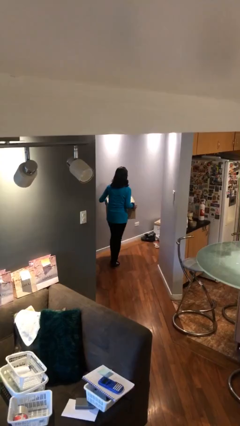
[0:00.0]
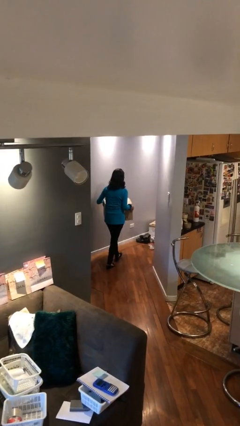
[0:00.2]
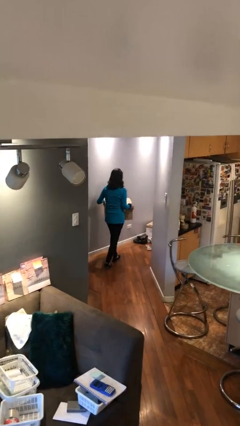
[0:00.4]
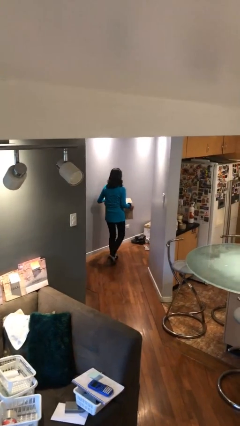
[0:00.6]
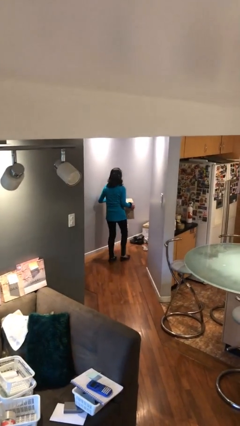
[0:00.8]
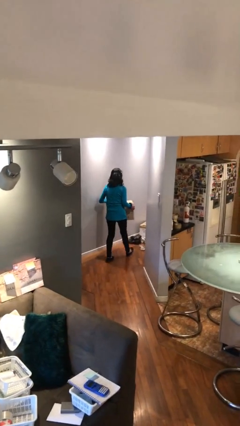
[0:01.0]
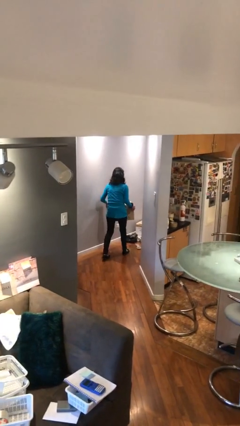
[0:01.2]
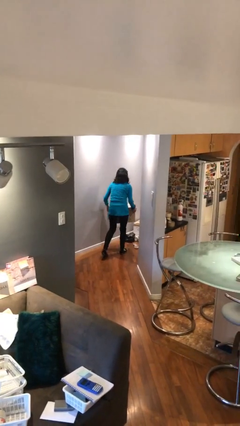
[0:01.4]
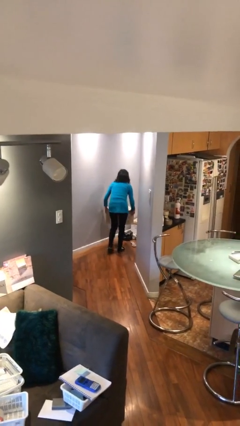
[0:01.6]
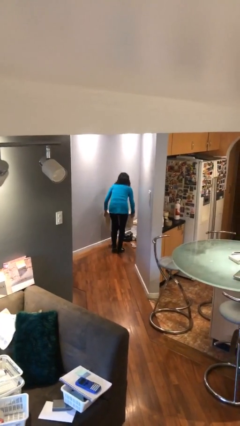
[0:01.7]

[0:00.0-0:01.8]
person carries heavy object

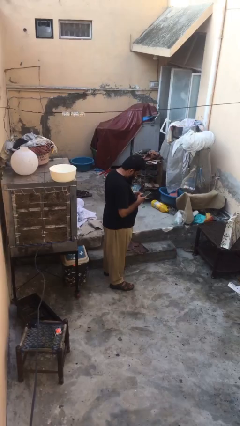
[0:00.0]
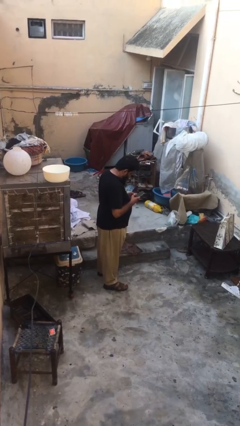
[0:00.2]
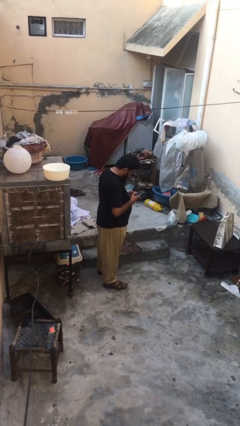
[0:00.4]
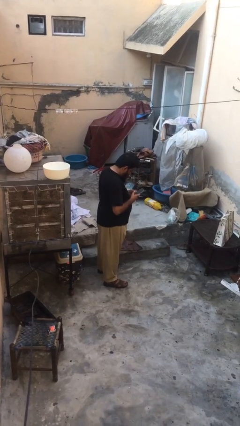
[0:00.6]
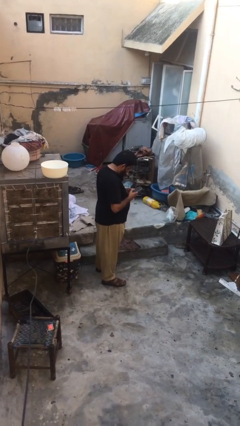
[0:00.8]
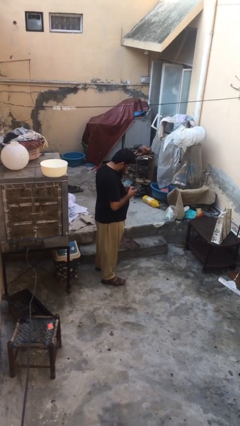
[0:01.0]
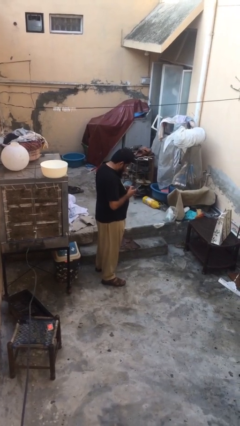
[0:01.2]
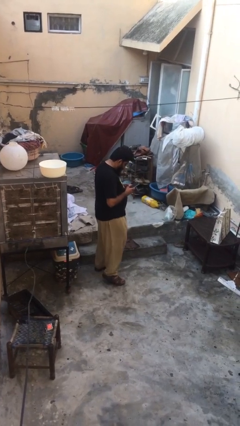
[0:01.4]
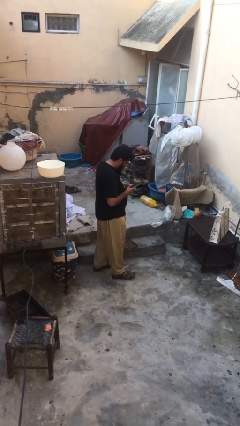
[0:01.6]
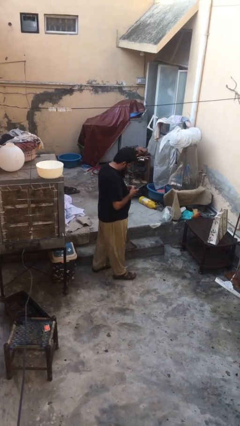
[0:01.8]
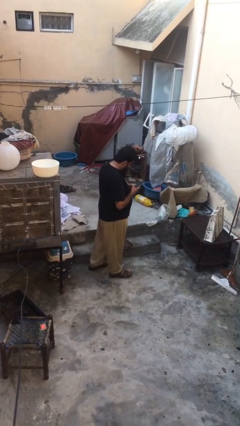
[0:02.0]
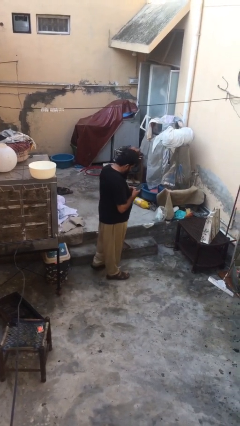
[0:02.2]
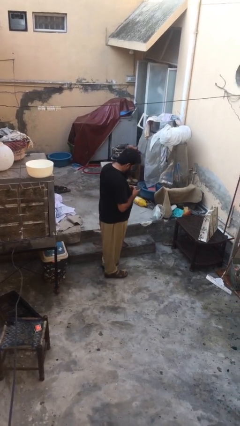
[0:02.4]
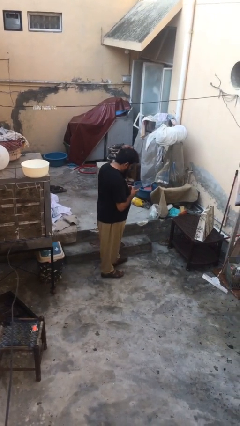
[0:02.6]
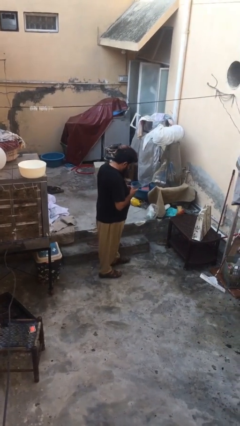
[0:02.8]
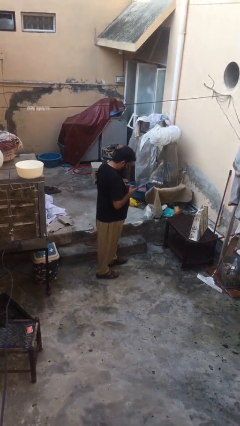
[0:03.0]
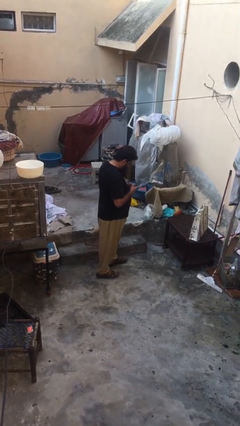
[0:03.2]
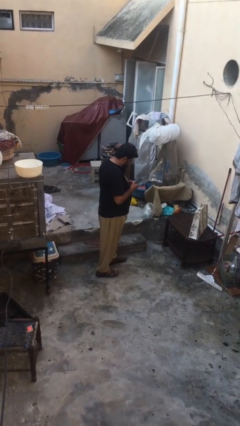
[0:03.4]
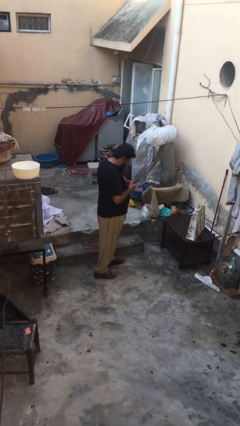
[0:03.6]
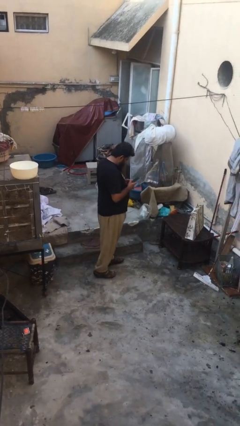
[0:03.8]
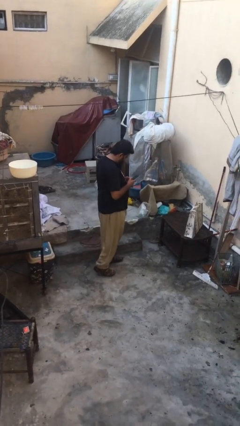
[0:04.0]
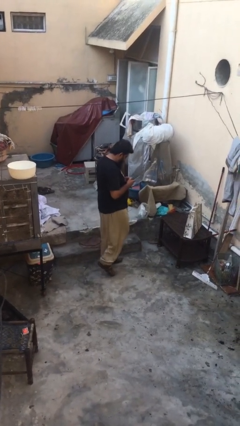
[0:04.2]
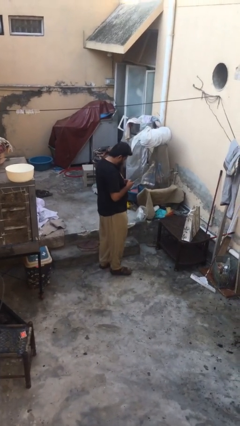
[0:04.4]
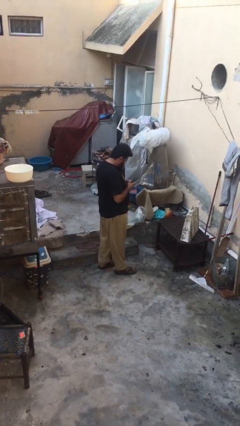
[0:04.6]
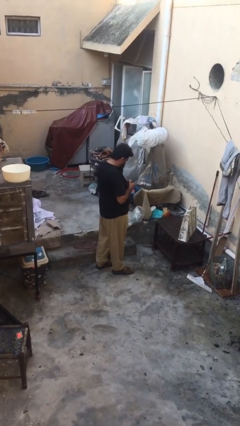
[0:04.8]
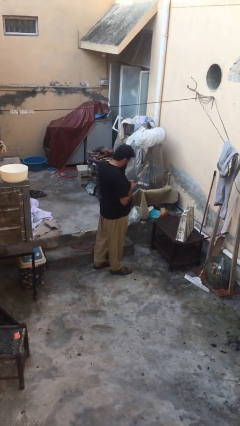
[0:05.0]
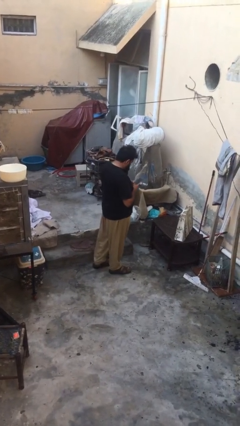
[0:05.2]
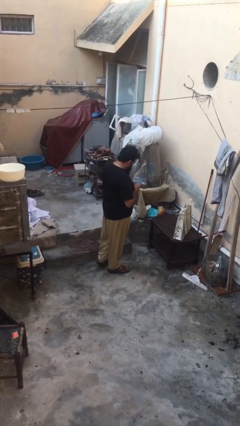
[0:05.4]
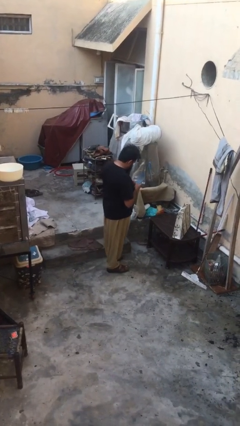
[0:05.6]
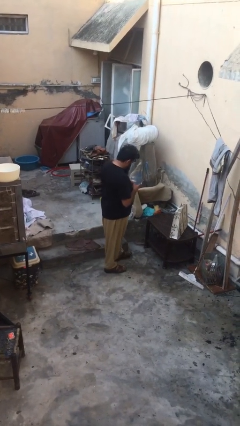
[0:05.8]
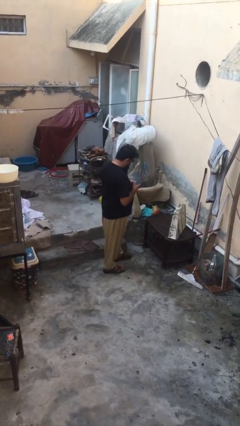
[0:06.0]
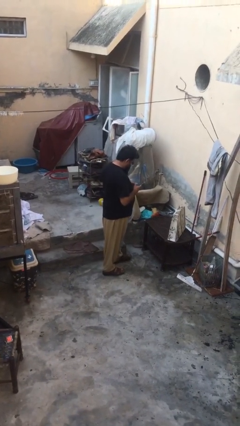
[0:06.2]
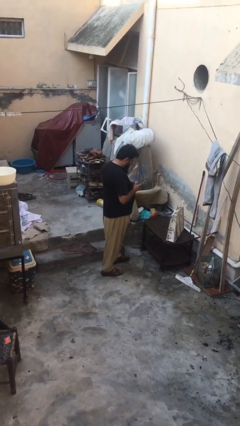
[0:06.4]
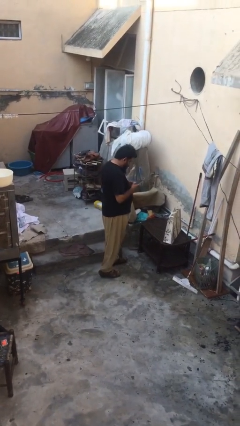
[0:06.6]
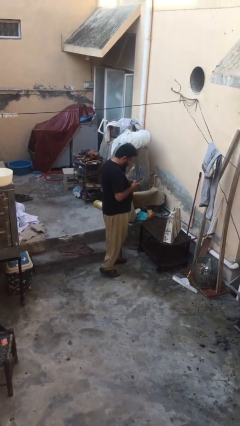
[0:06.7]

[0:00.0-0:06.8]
person texts on phone

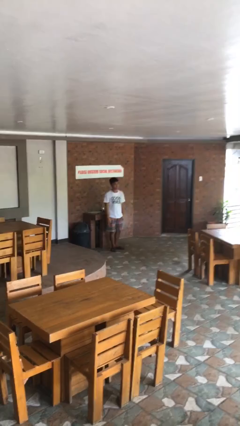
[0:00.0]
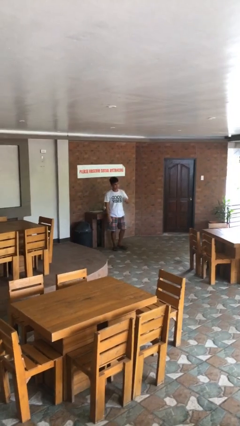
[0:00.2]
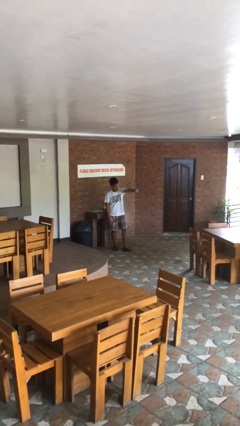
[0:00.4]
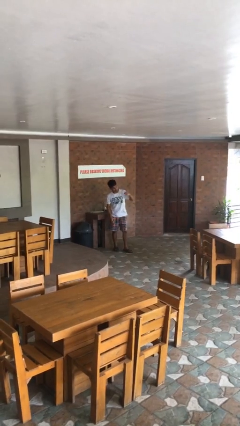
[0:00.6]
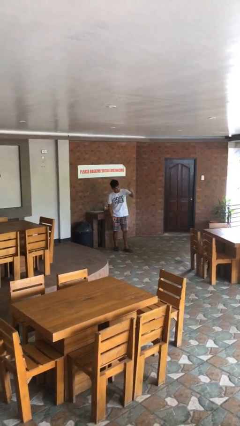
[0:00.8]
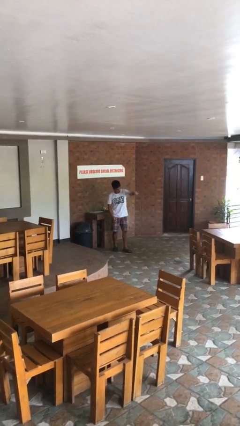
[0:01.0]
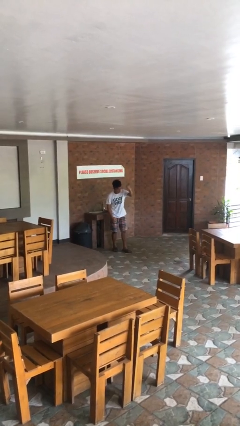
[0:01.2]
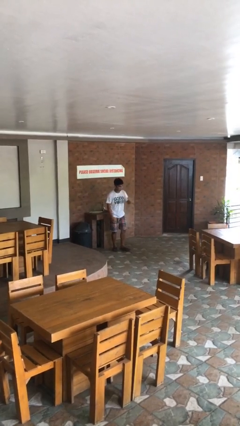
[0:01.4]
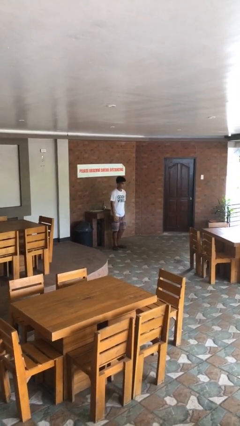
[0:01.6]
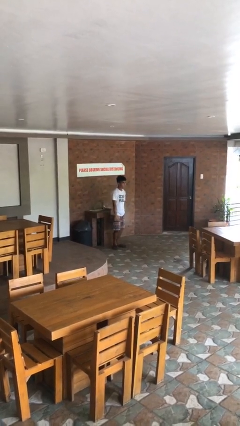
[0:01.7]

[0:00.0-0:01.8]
person punches

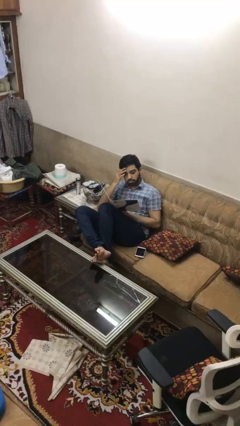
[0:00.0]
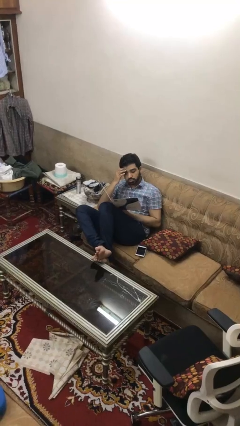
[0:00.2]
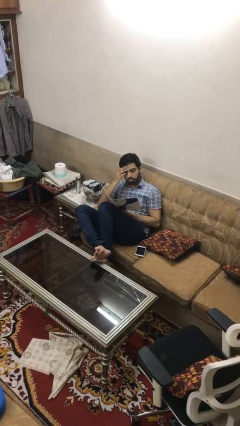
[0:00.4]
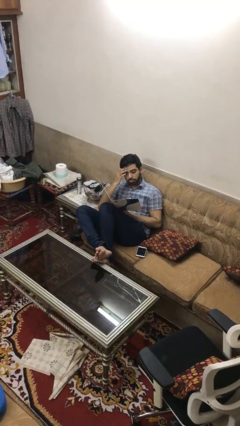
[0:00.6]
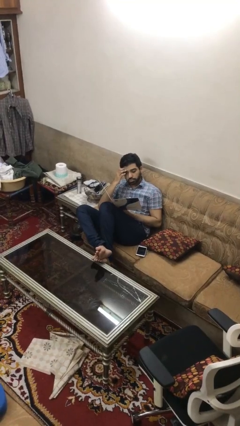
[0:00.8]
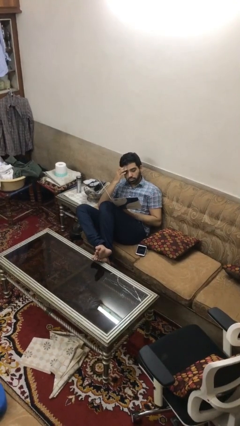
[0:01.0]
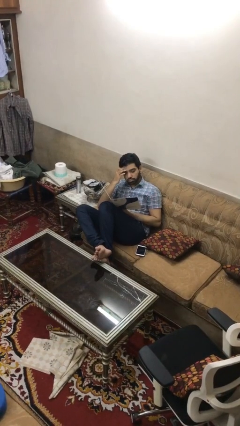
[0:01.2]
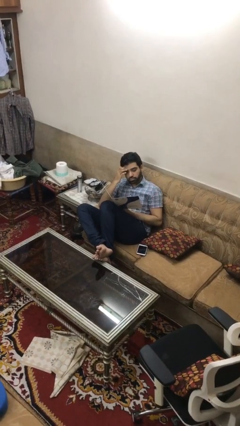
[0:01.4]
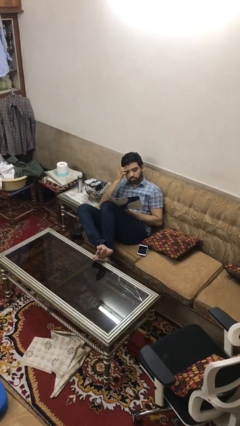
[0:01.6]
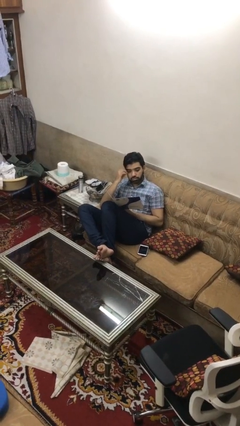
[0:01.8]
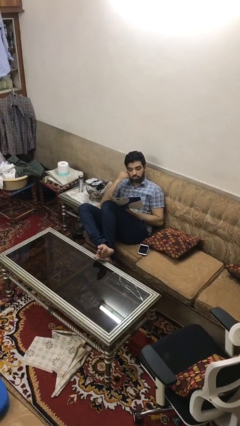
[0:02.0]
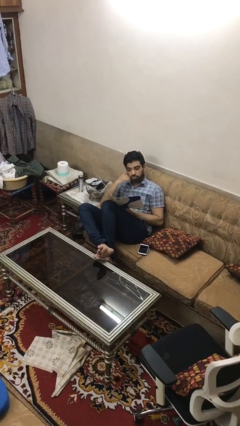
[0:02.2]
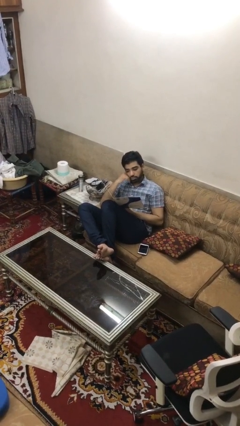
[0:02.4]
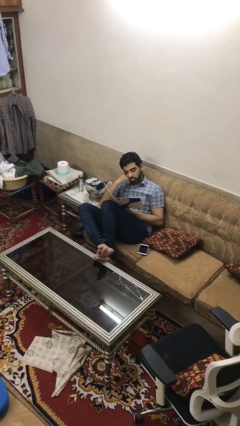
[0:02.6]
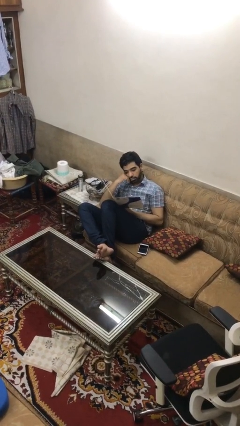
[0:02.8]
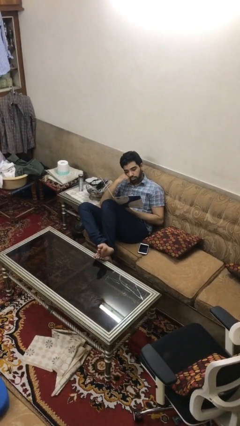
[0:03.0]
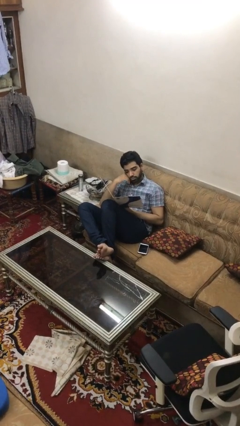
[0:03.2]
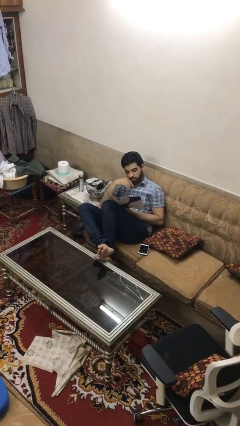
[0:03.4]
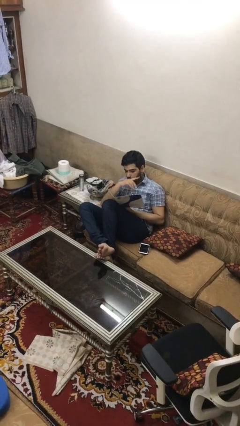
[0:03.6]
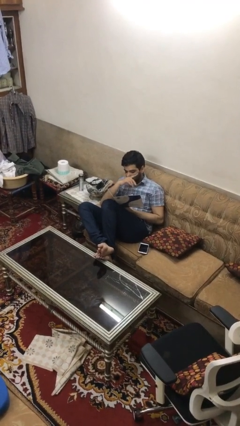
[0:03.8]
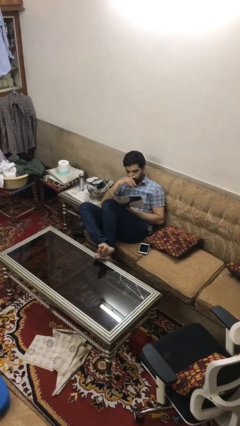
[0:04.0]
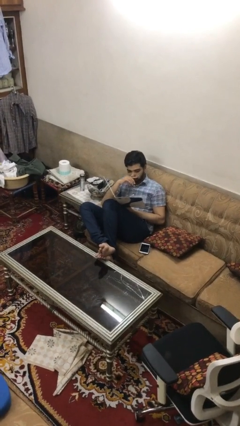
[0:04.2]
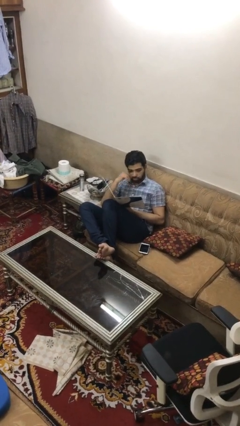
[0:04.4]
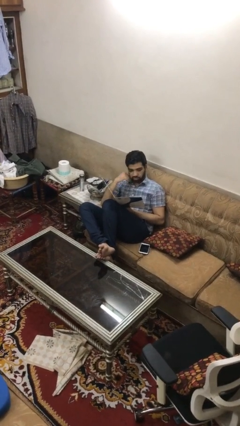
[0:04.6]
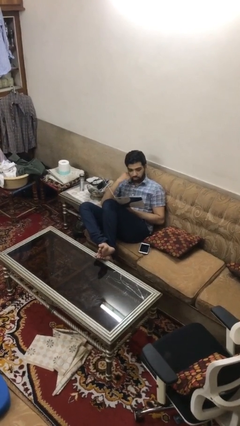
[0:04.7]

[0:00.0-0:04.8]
person reads document

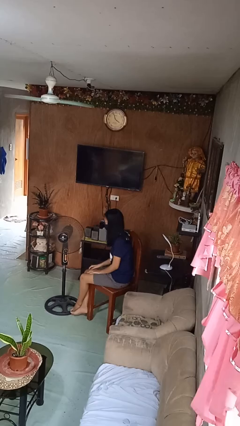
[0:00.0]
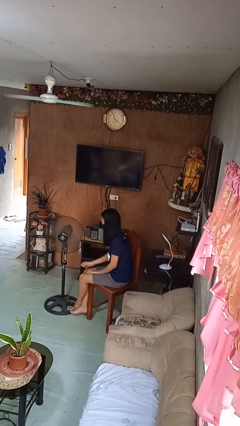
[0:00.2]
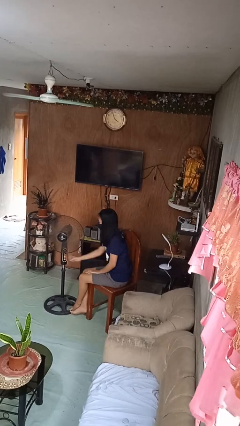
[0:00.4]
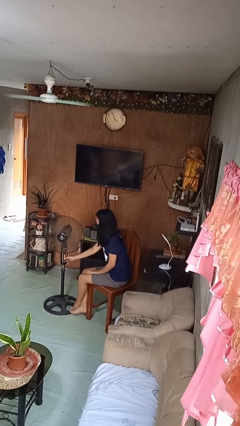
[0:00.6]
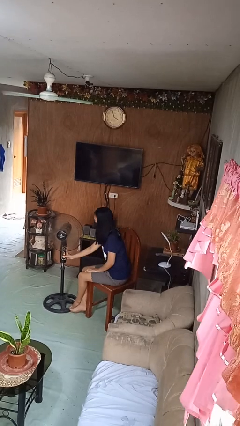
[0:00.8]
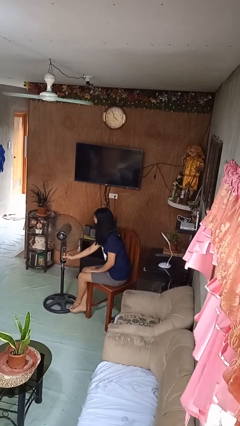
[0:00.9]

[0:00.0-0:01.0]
person turns on fan

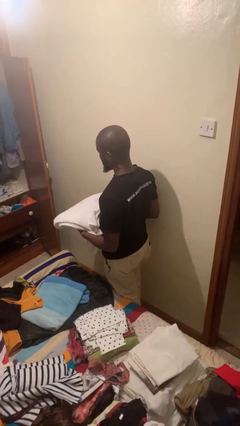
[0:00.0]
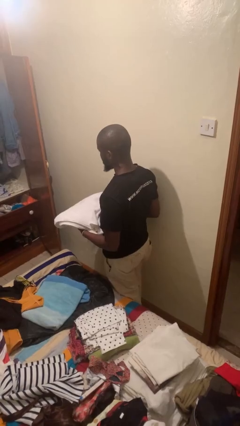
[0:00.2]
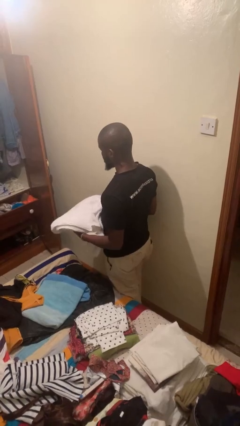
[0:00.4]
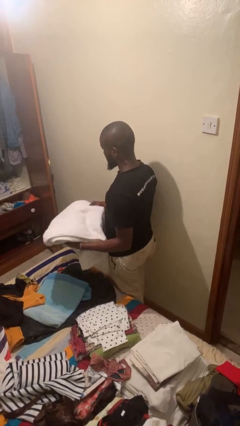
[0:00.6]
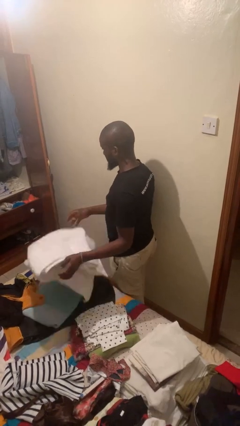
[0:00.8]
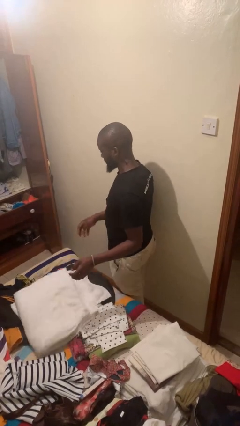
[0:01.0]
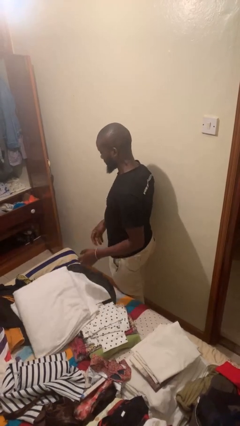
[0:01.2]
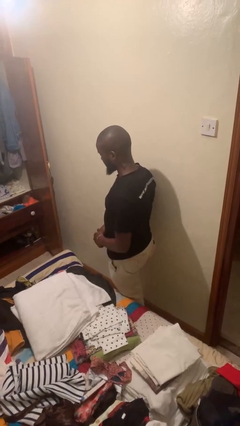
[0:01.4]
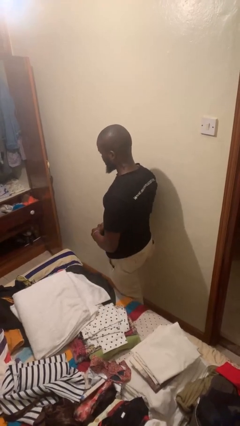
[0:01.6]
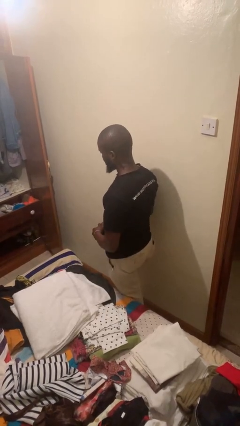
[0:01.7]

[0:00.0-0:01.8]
person throws object on bed
